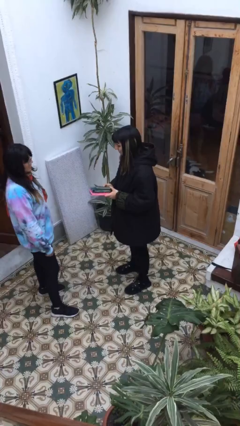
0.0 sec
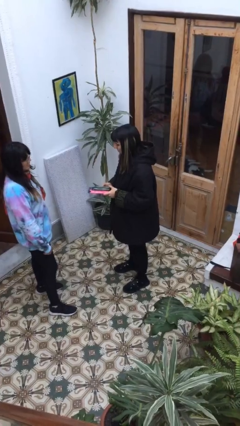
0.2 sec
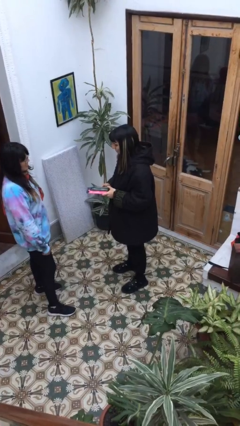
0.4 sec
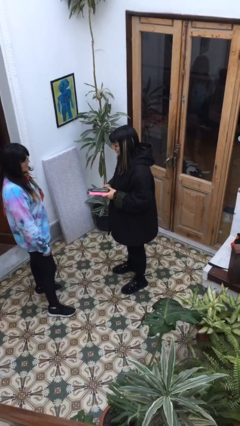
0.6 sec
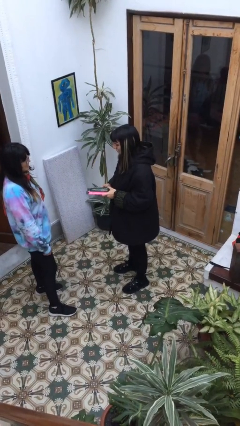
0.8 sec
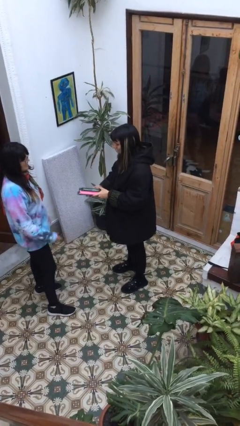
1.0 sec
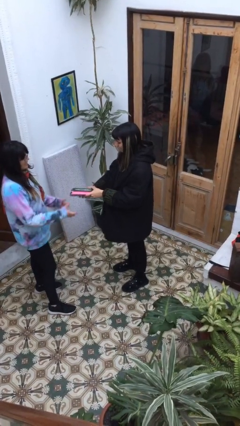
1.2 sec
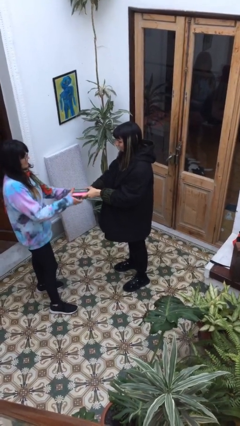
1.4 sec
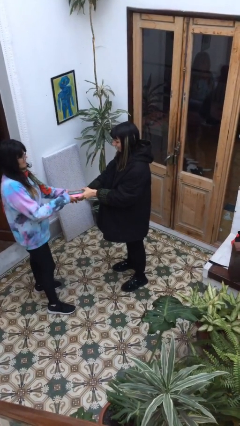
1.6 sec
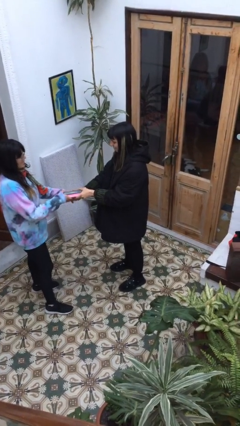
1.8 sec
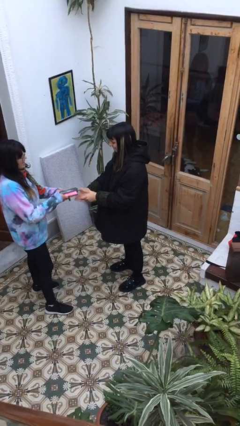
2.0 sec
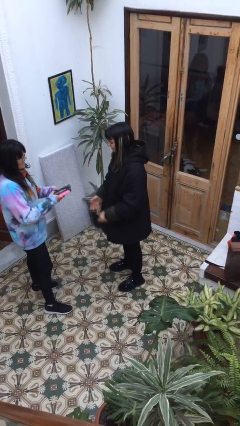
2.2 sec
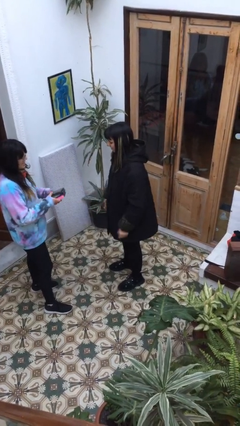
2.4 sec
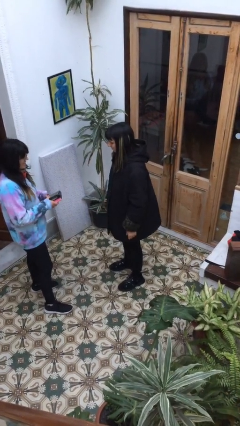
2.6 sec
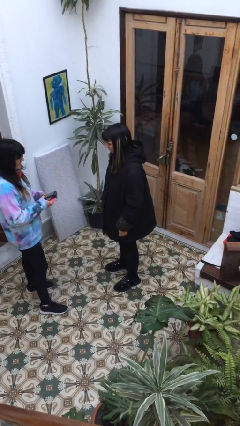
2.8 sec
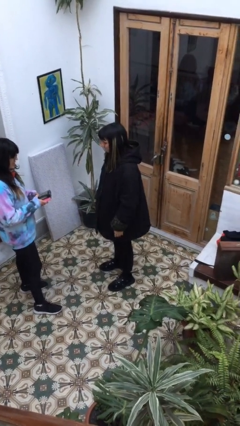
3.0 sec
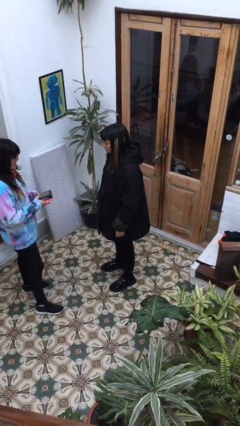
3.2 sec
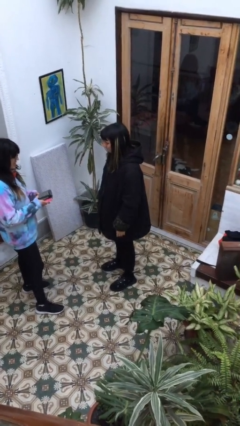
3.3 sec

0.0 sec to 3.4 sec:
person transfers object to person

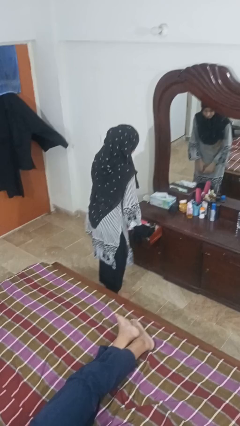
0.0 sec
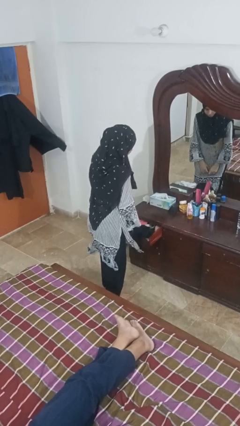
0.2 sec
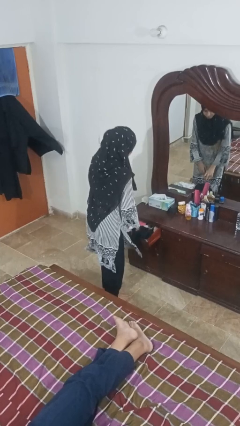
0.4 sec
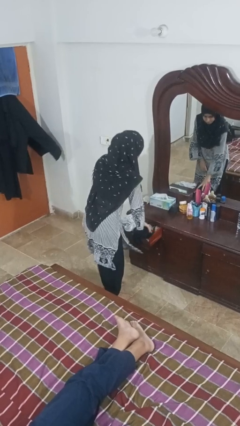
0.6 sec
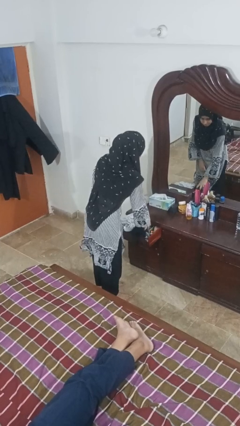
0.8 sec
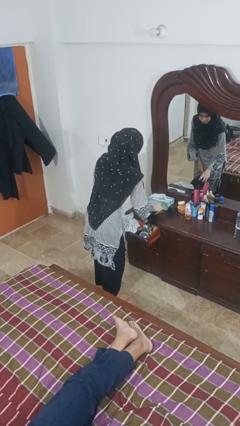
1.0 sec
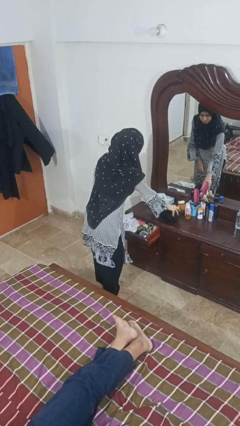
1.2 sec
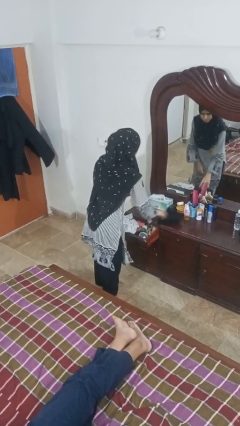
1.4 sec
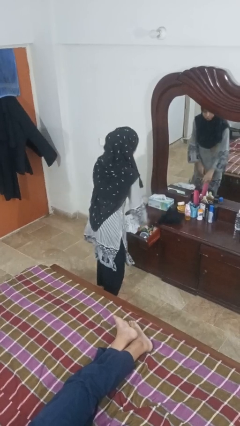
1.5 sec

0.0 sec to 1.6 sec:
person takes clothes from dresser

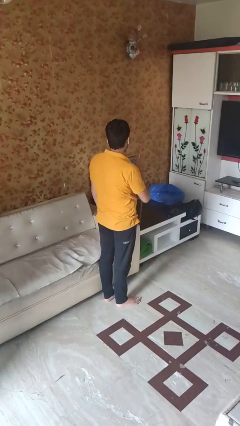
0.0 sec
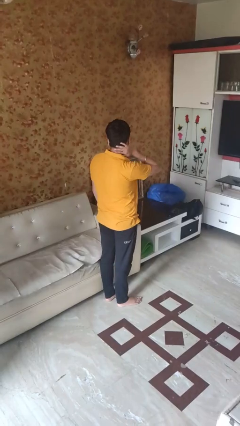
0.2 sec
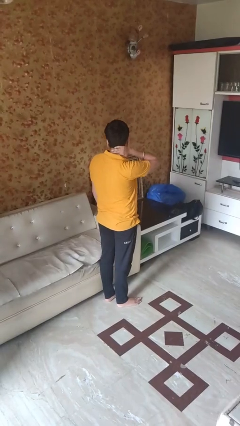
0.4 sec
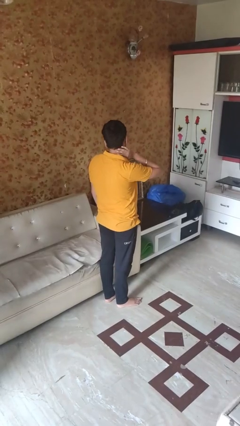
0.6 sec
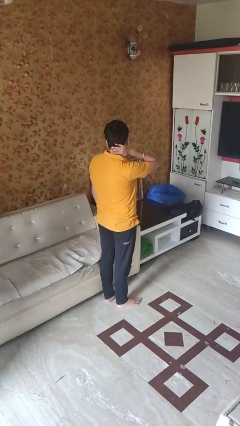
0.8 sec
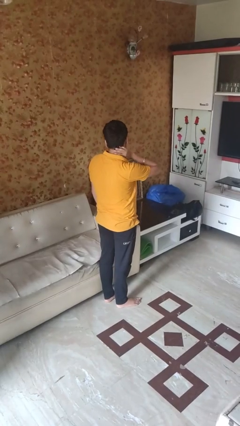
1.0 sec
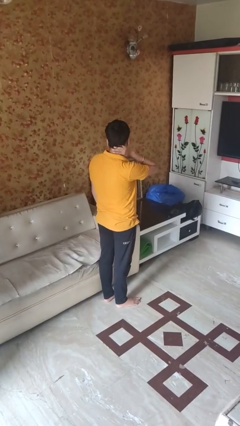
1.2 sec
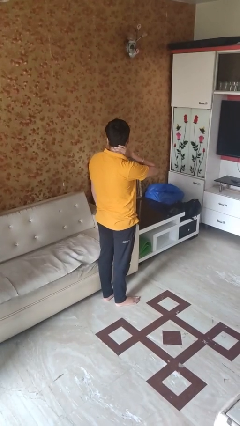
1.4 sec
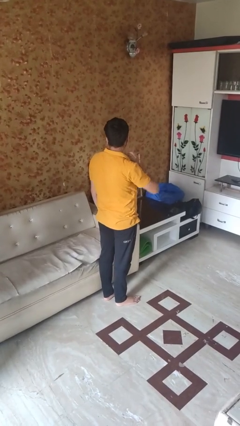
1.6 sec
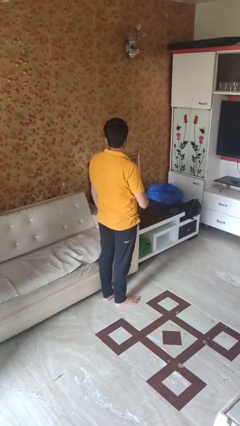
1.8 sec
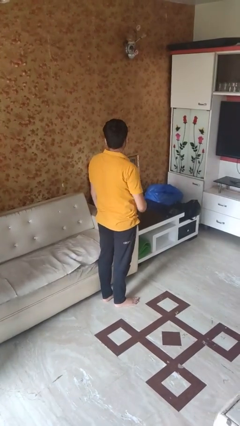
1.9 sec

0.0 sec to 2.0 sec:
person rubs neck

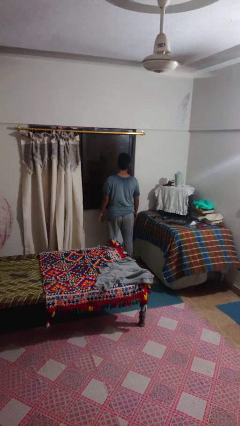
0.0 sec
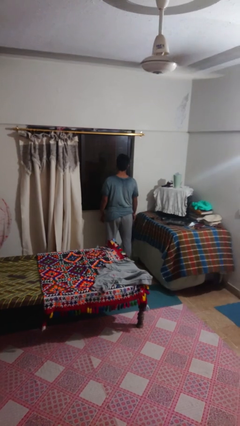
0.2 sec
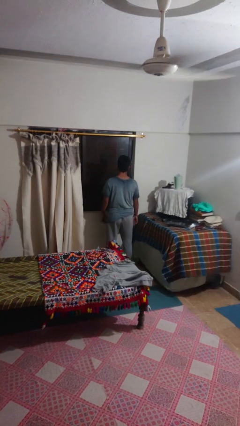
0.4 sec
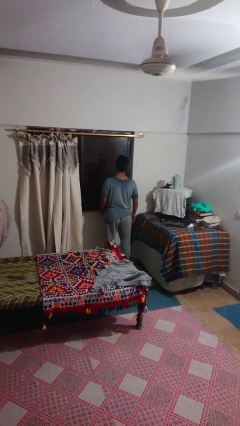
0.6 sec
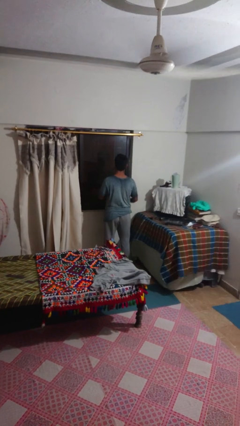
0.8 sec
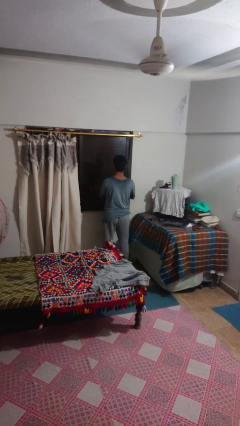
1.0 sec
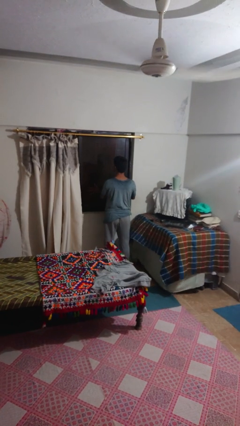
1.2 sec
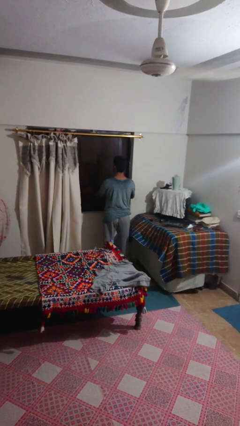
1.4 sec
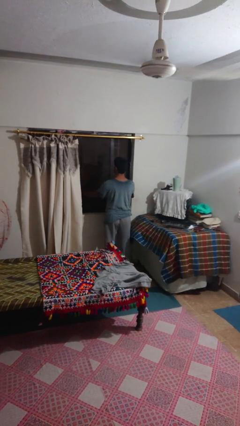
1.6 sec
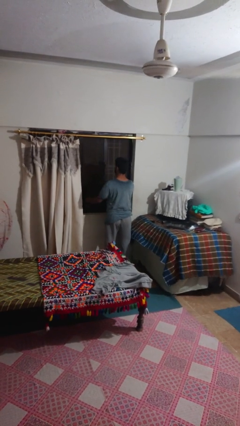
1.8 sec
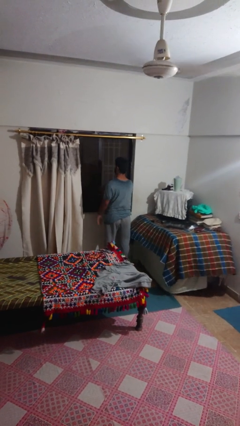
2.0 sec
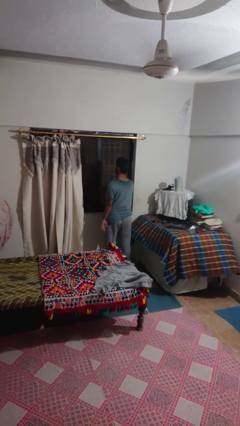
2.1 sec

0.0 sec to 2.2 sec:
person opens home window

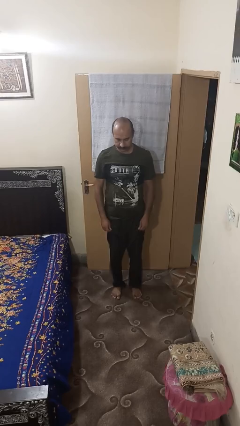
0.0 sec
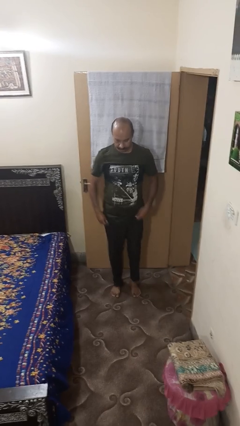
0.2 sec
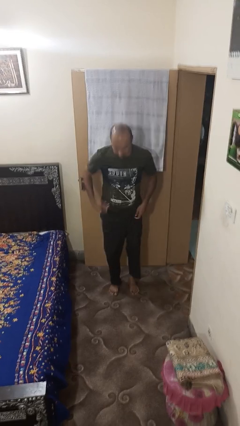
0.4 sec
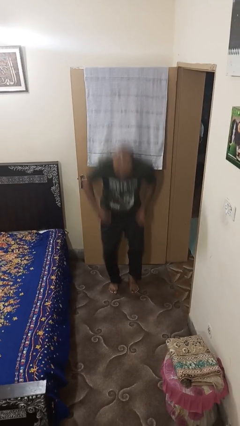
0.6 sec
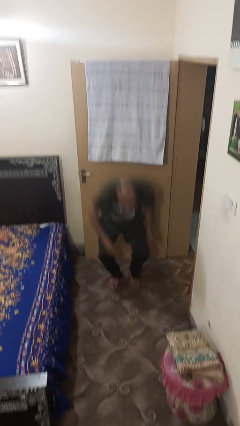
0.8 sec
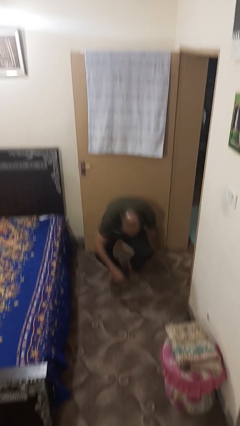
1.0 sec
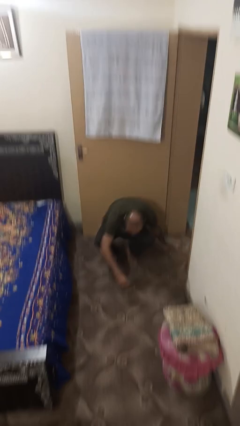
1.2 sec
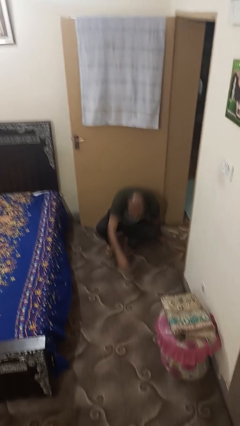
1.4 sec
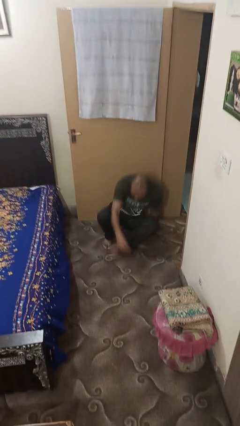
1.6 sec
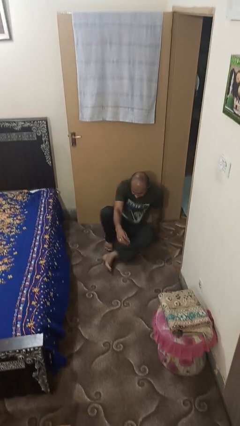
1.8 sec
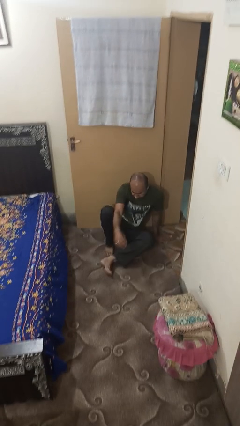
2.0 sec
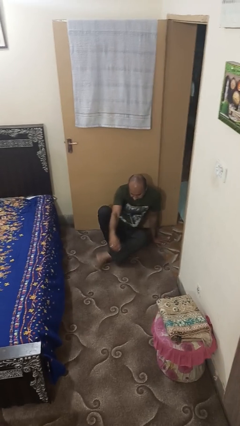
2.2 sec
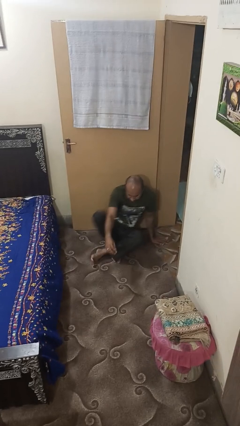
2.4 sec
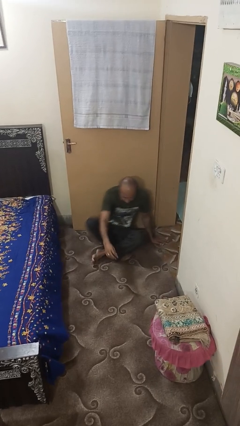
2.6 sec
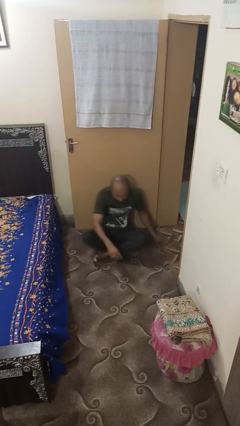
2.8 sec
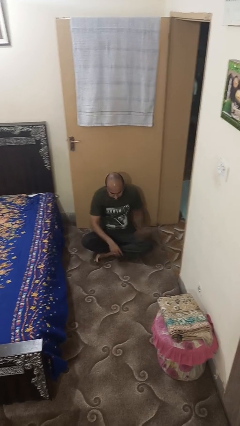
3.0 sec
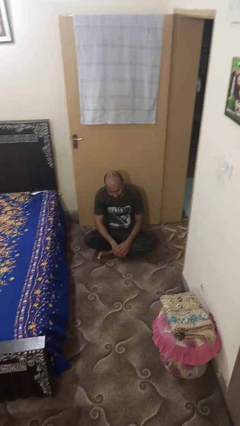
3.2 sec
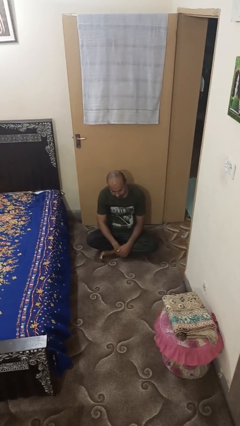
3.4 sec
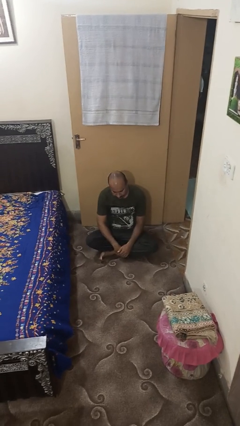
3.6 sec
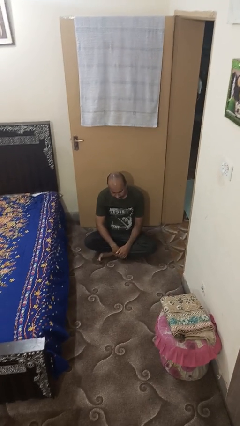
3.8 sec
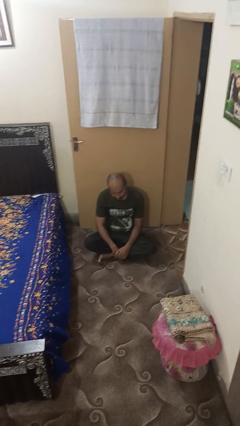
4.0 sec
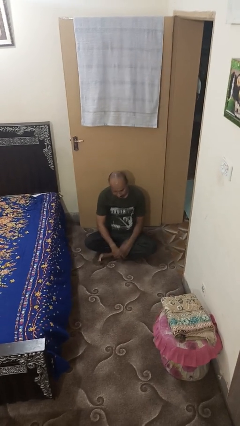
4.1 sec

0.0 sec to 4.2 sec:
person sits crisscross

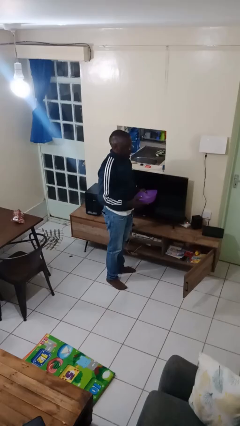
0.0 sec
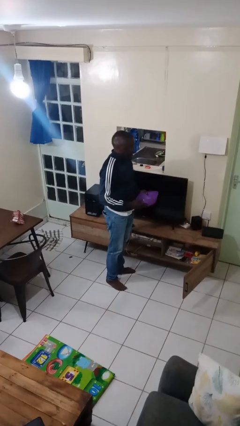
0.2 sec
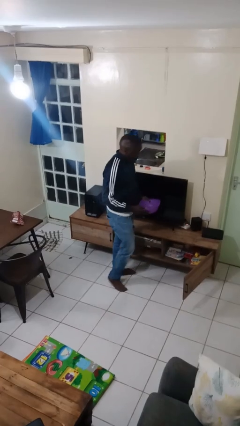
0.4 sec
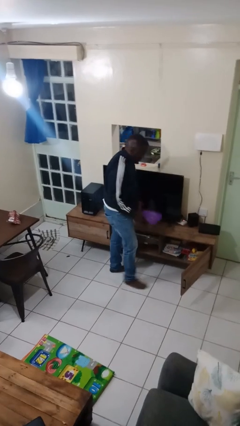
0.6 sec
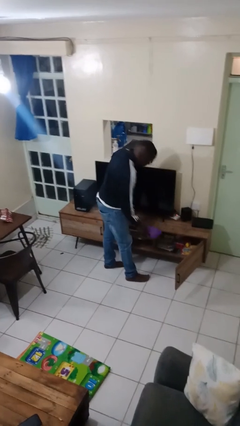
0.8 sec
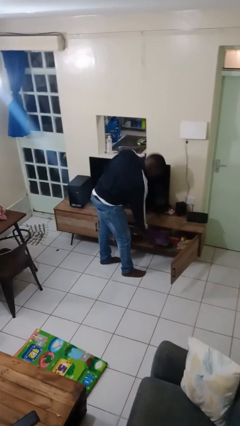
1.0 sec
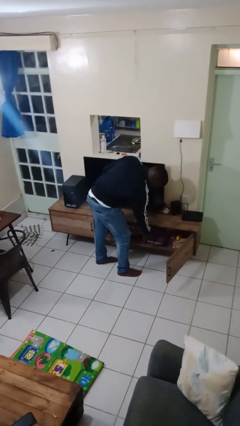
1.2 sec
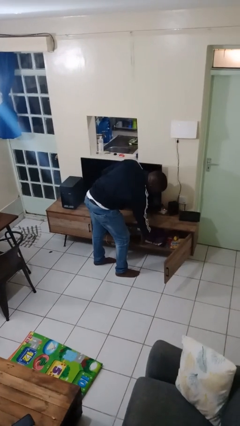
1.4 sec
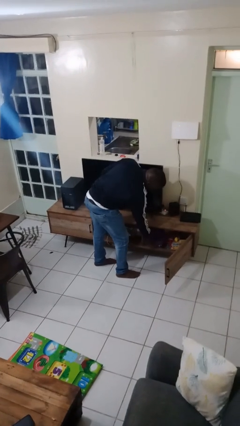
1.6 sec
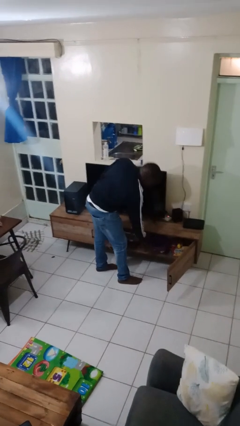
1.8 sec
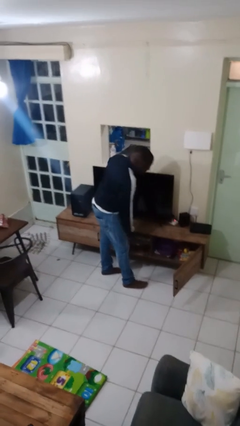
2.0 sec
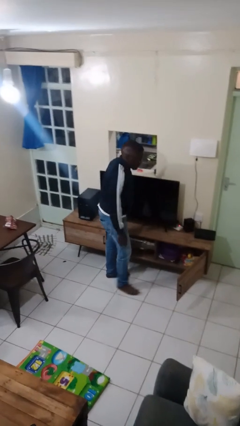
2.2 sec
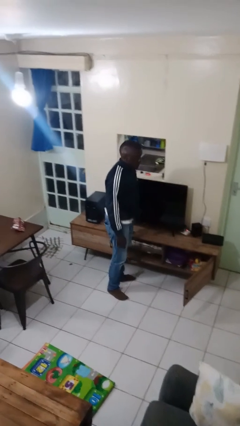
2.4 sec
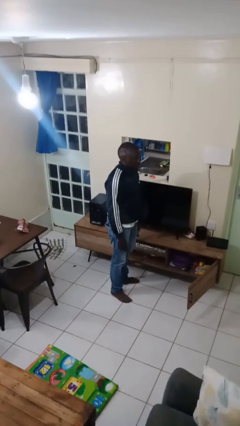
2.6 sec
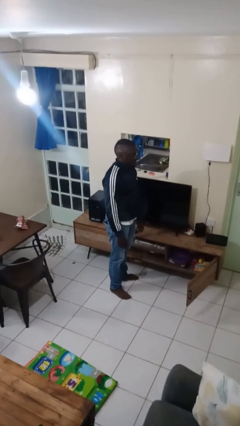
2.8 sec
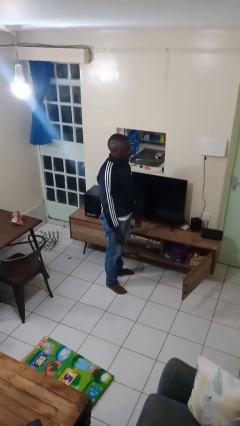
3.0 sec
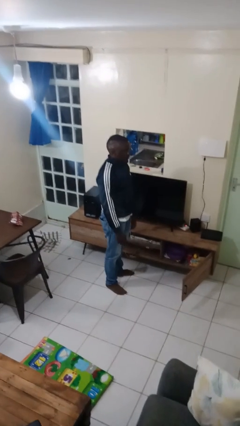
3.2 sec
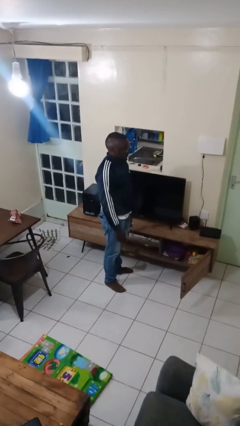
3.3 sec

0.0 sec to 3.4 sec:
person puts down object into cabinet

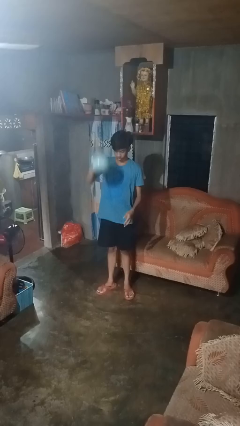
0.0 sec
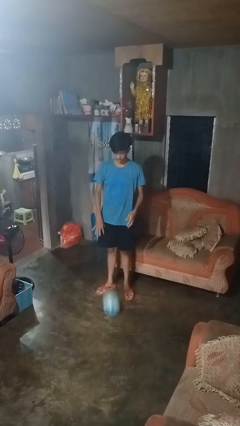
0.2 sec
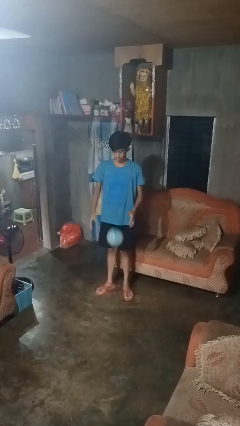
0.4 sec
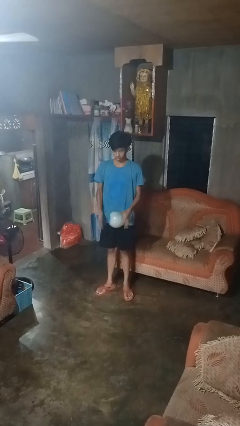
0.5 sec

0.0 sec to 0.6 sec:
person bounces ball on floor
